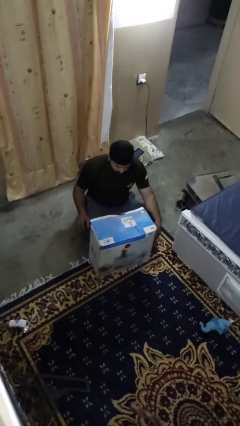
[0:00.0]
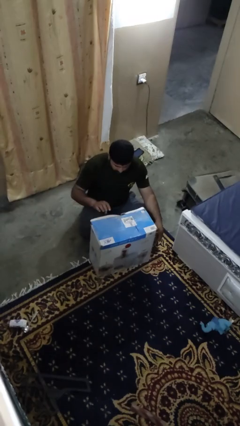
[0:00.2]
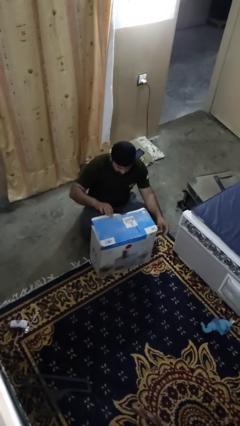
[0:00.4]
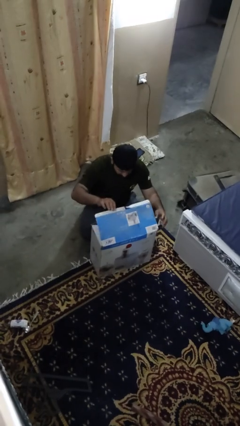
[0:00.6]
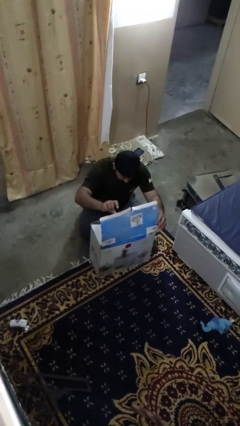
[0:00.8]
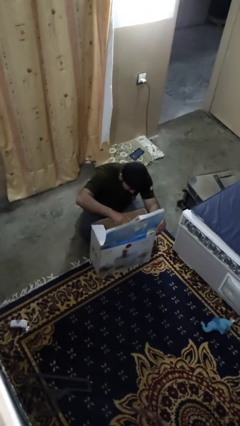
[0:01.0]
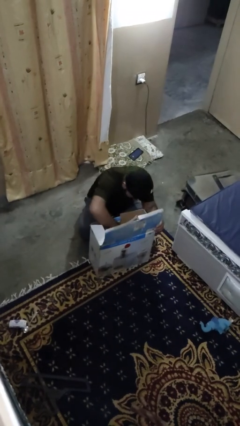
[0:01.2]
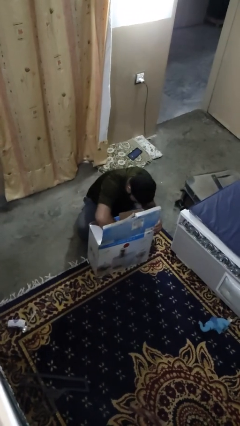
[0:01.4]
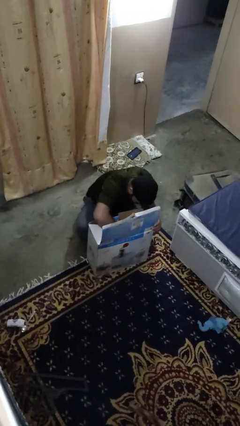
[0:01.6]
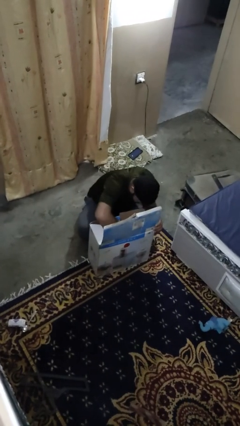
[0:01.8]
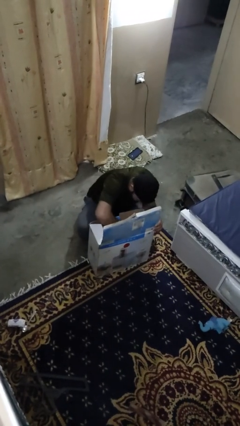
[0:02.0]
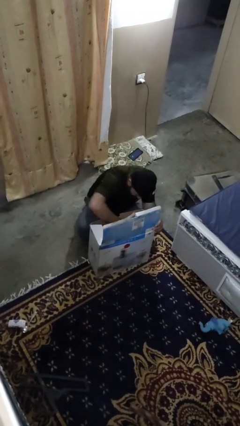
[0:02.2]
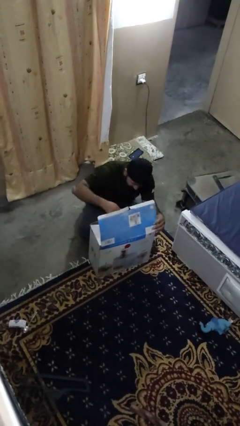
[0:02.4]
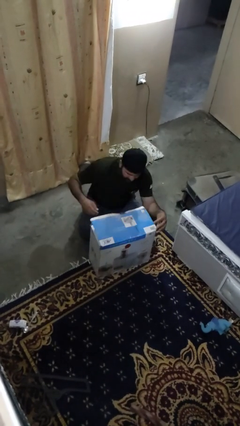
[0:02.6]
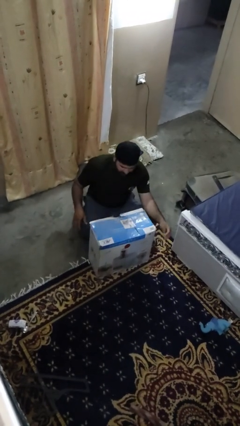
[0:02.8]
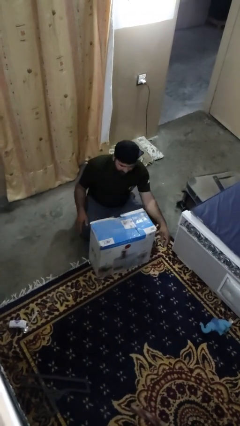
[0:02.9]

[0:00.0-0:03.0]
person searches in box

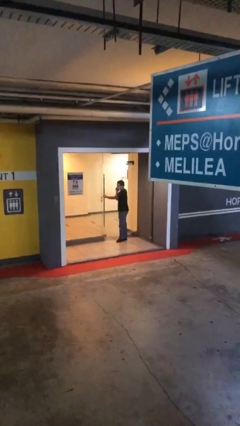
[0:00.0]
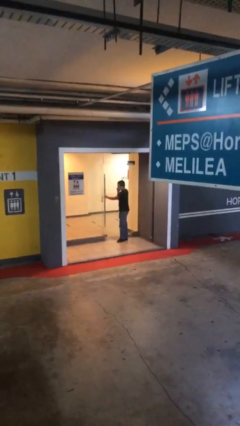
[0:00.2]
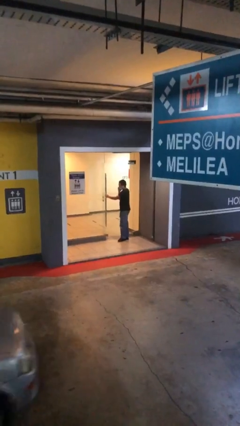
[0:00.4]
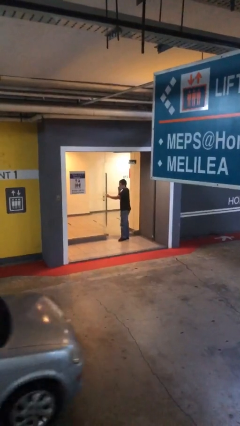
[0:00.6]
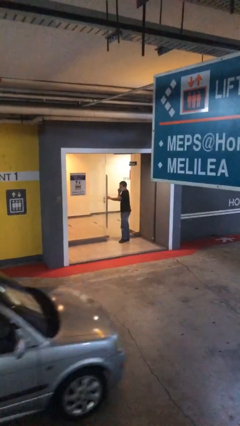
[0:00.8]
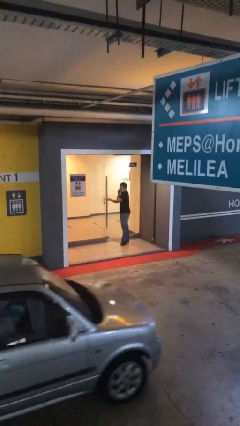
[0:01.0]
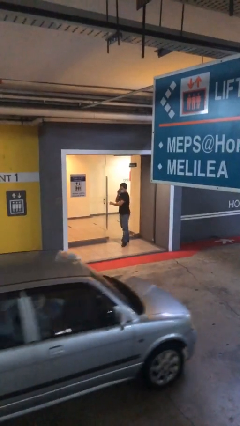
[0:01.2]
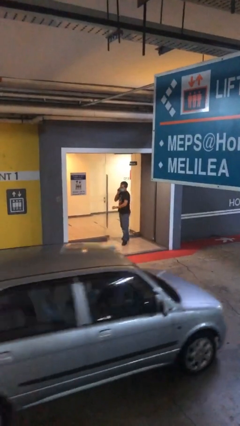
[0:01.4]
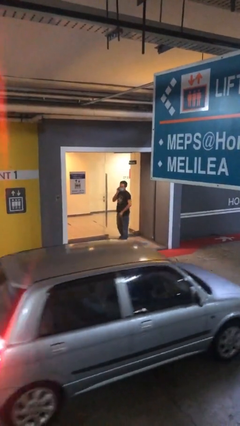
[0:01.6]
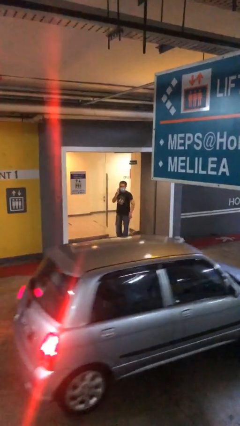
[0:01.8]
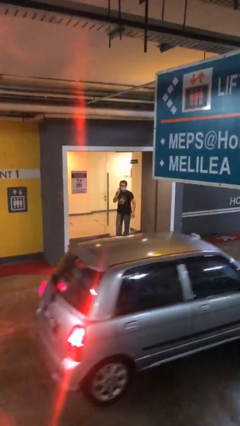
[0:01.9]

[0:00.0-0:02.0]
person closes facility door

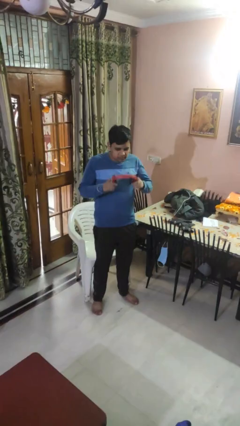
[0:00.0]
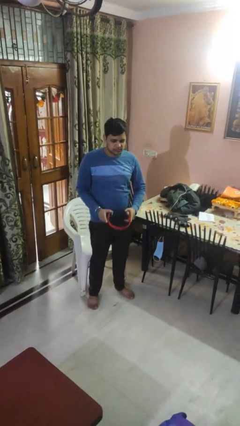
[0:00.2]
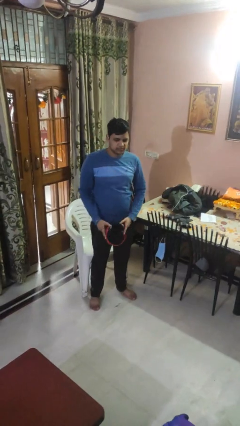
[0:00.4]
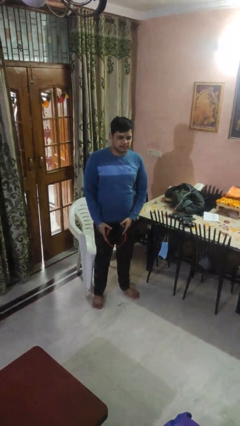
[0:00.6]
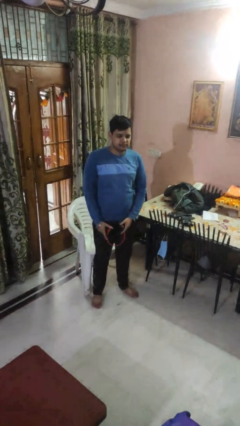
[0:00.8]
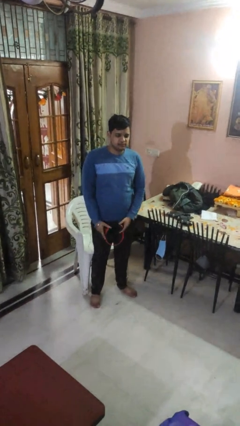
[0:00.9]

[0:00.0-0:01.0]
person takes off headphones

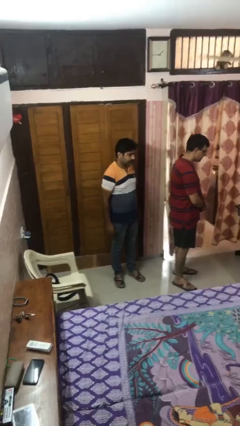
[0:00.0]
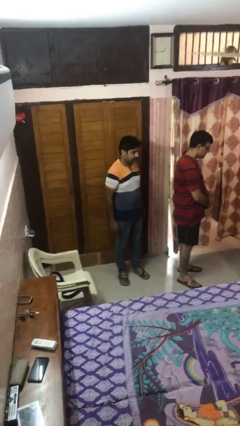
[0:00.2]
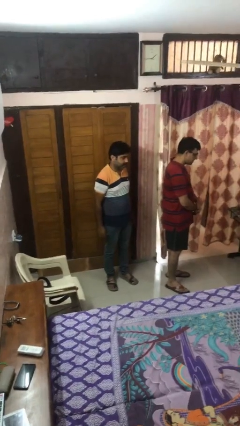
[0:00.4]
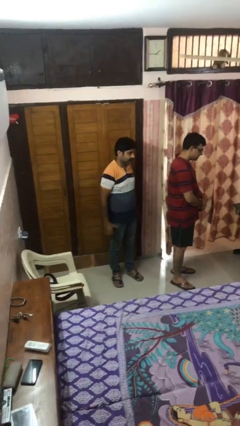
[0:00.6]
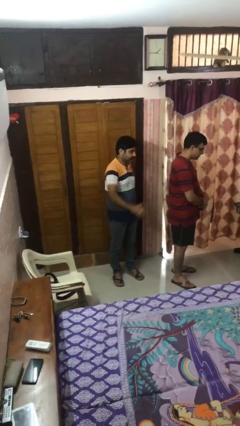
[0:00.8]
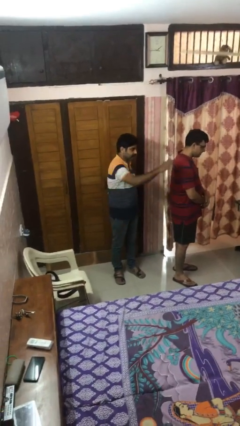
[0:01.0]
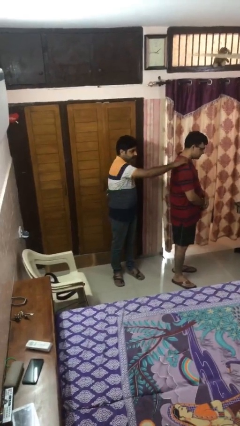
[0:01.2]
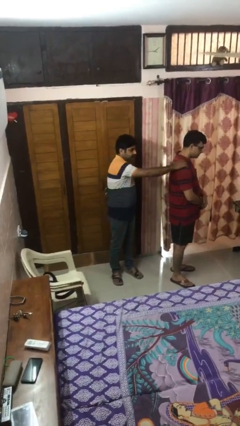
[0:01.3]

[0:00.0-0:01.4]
person grabs person by shoulder

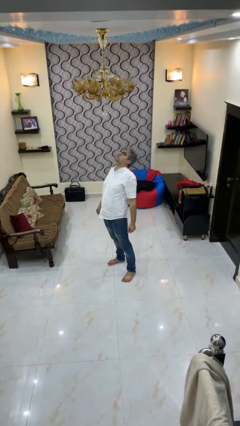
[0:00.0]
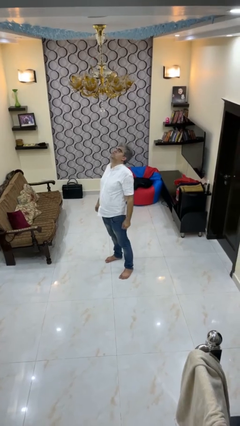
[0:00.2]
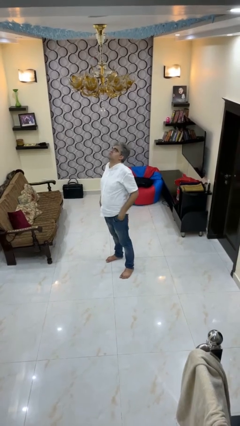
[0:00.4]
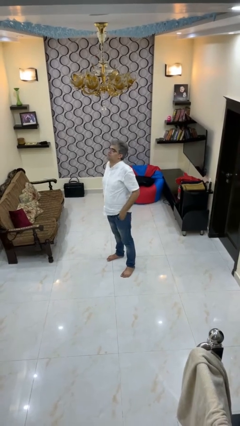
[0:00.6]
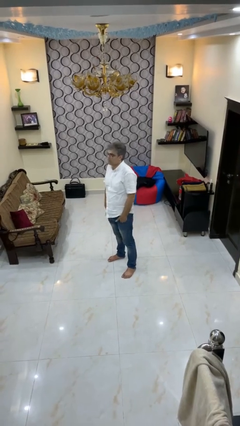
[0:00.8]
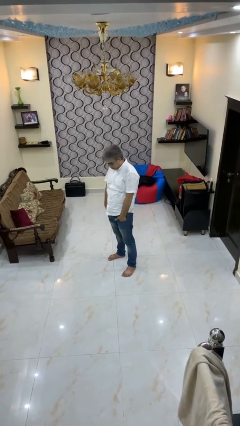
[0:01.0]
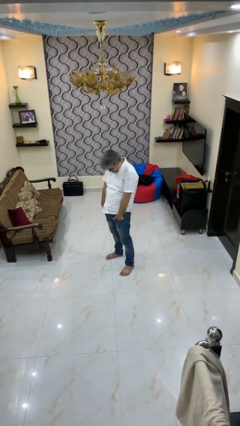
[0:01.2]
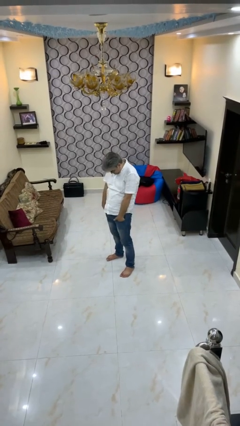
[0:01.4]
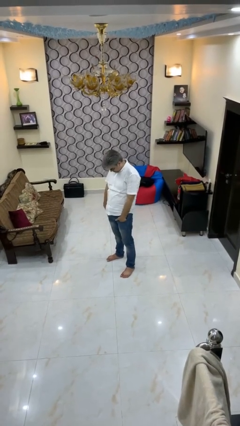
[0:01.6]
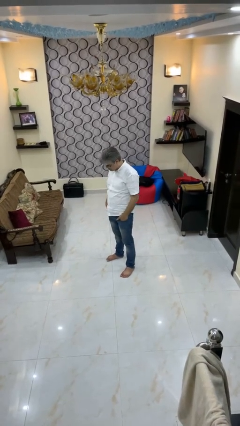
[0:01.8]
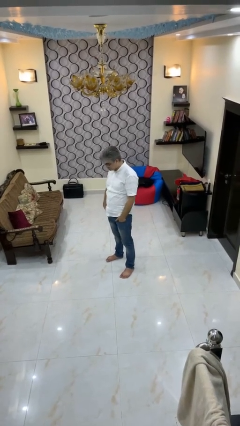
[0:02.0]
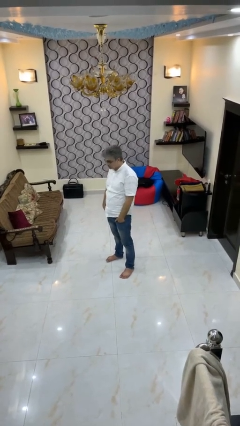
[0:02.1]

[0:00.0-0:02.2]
person puts hands in back pockets

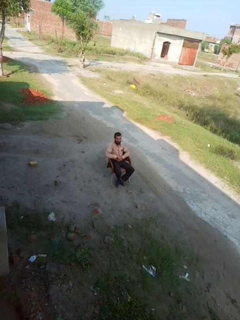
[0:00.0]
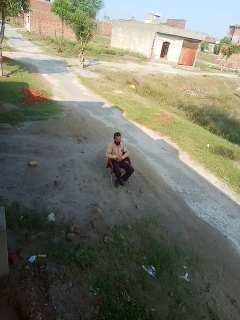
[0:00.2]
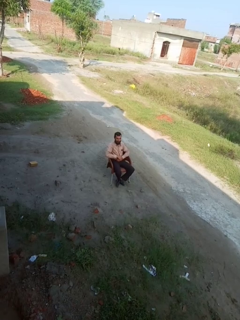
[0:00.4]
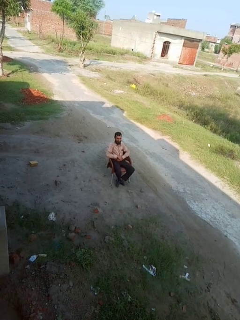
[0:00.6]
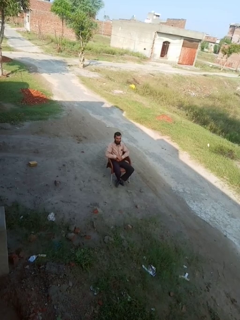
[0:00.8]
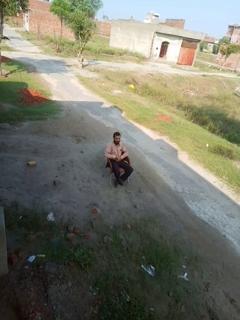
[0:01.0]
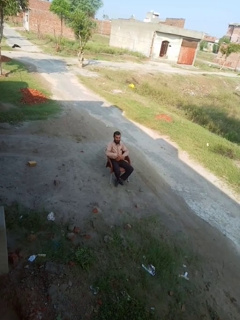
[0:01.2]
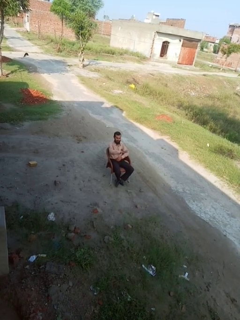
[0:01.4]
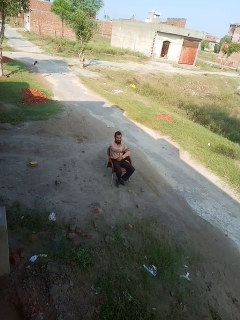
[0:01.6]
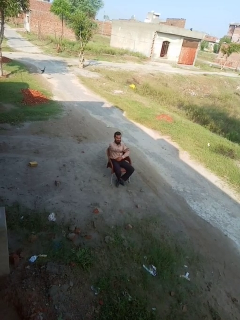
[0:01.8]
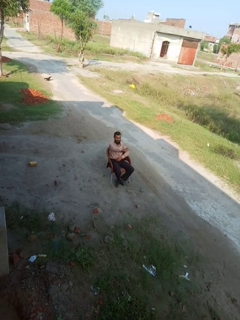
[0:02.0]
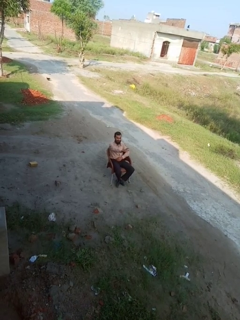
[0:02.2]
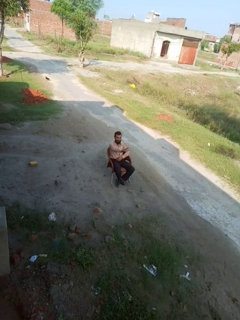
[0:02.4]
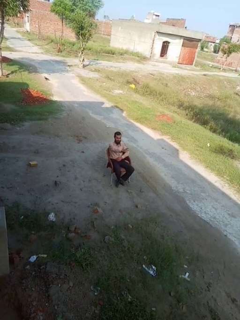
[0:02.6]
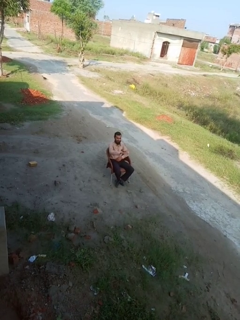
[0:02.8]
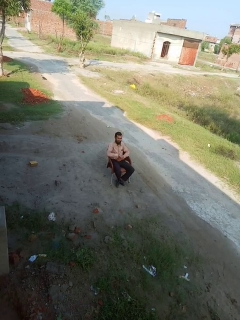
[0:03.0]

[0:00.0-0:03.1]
person gestures stop

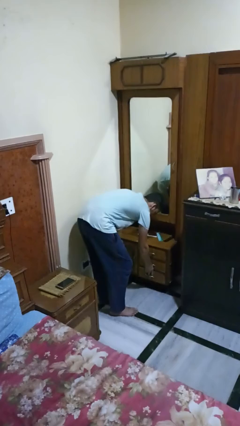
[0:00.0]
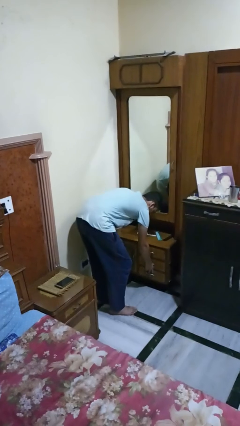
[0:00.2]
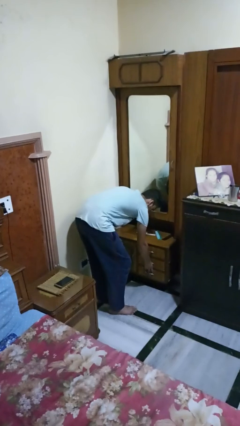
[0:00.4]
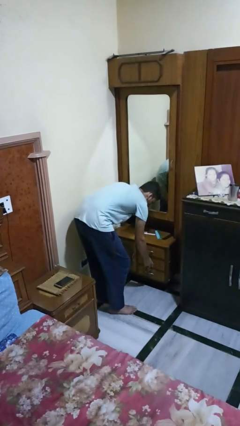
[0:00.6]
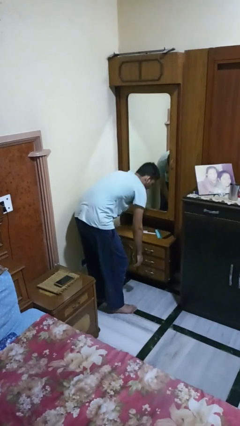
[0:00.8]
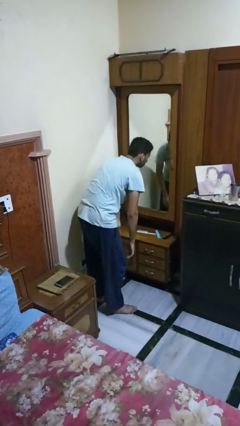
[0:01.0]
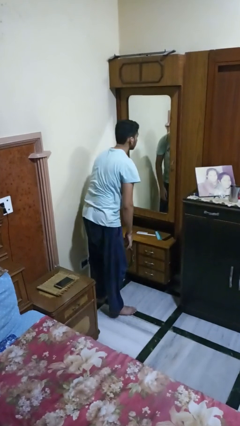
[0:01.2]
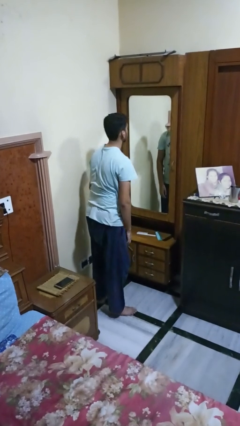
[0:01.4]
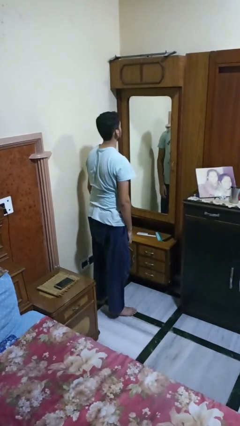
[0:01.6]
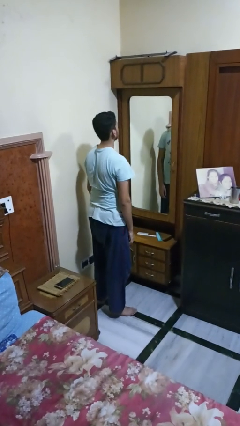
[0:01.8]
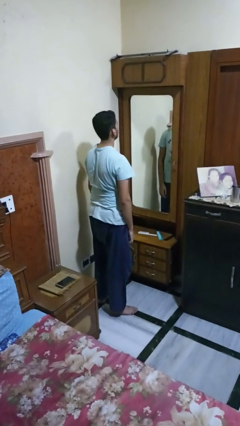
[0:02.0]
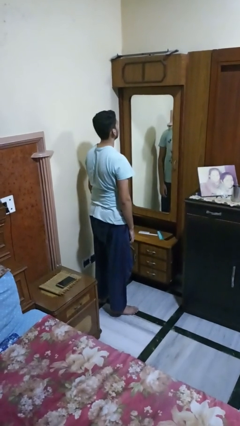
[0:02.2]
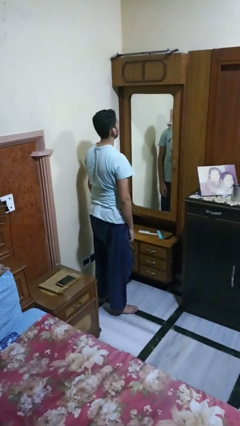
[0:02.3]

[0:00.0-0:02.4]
person closes dresser drawer

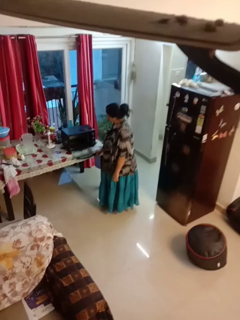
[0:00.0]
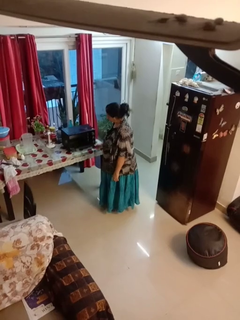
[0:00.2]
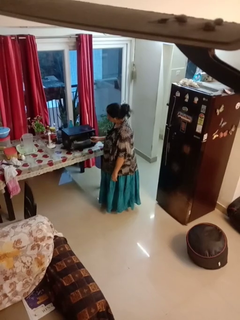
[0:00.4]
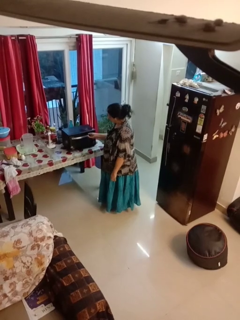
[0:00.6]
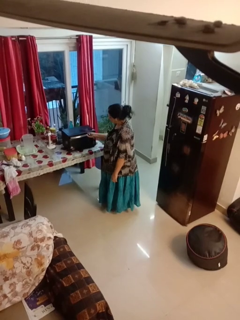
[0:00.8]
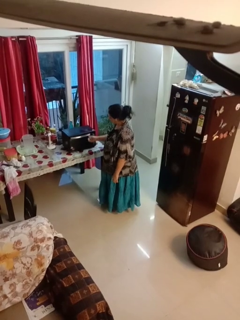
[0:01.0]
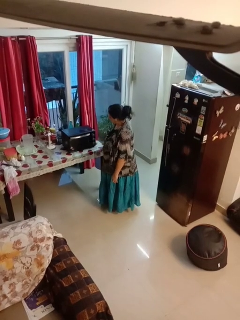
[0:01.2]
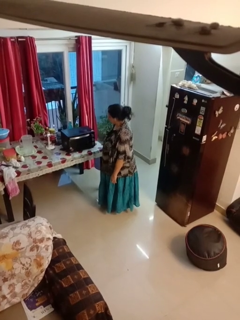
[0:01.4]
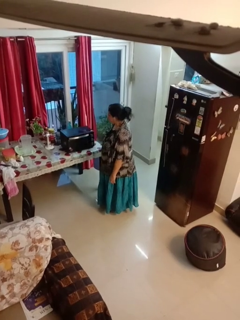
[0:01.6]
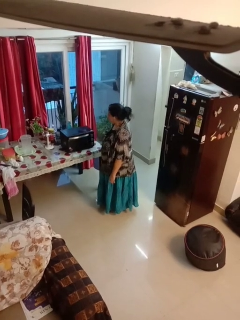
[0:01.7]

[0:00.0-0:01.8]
person closes microwave

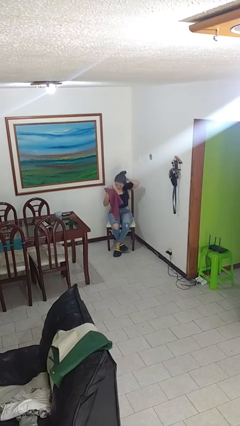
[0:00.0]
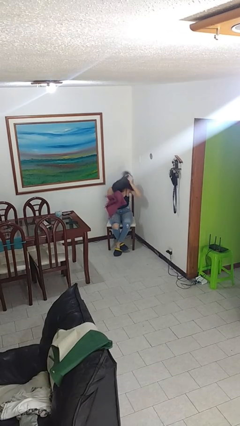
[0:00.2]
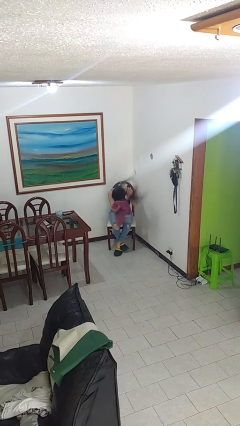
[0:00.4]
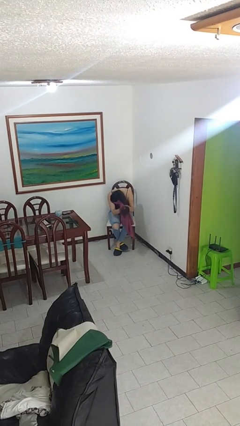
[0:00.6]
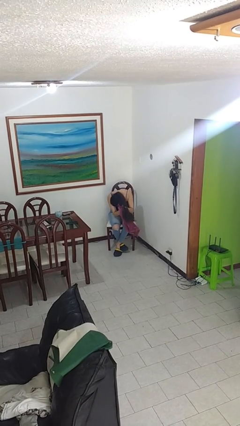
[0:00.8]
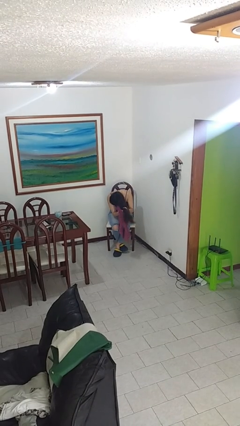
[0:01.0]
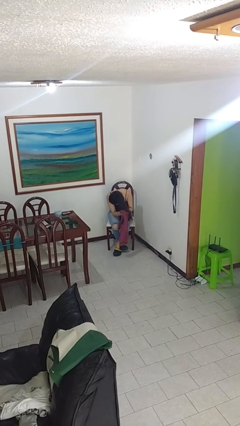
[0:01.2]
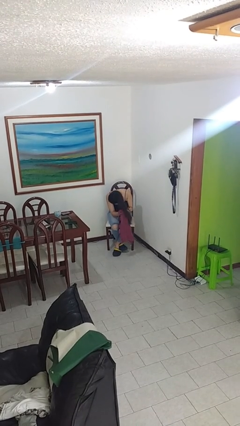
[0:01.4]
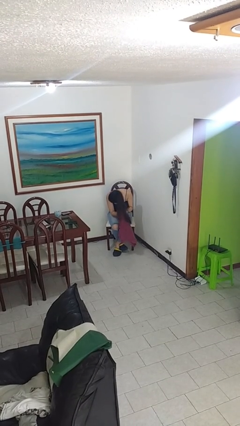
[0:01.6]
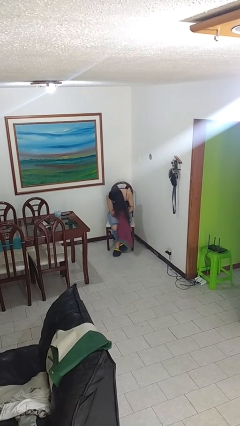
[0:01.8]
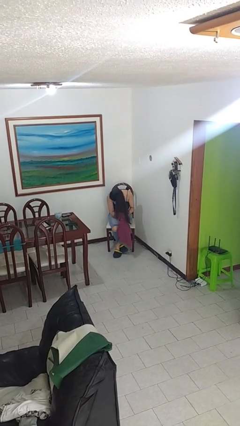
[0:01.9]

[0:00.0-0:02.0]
person dries hair with towel
